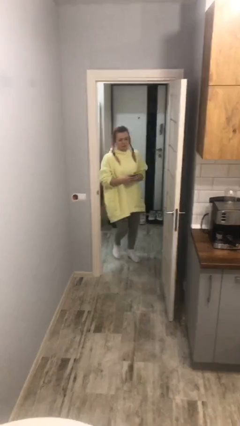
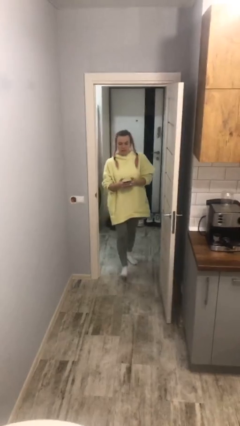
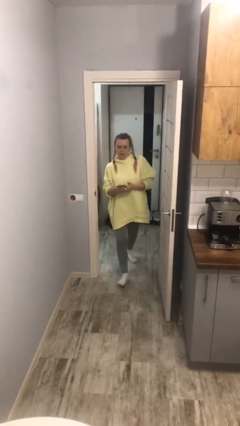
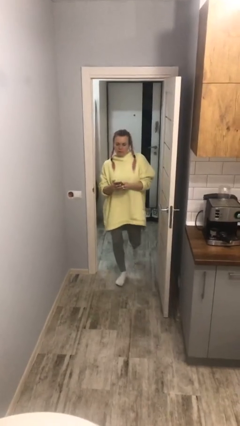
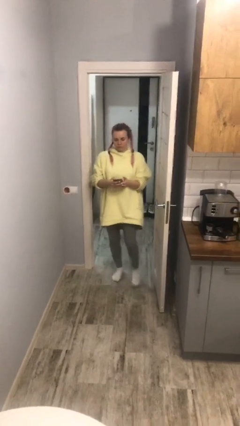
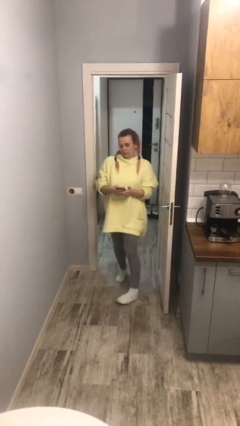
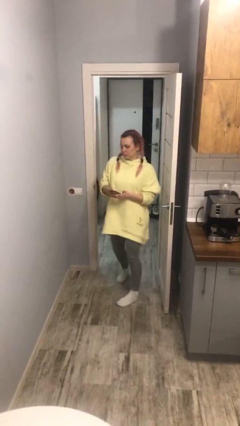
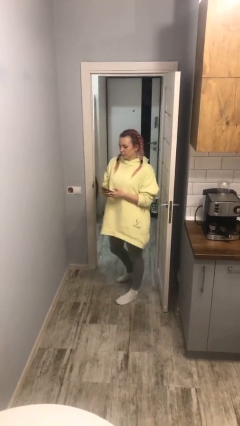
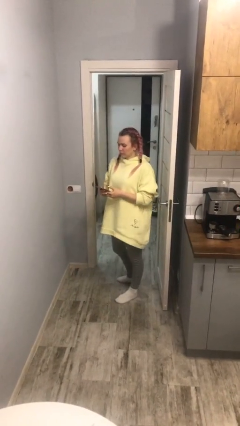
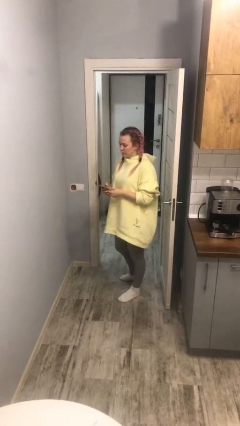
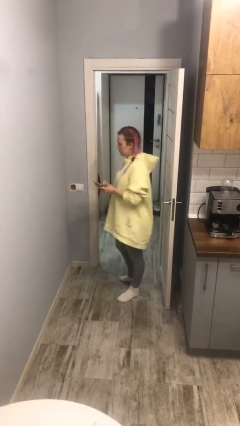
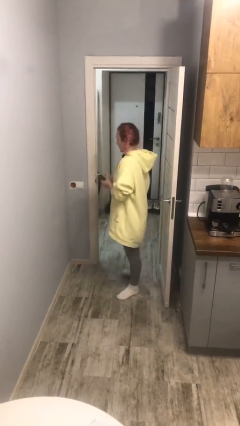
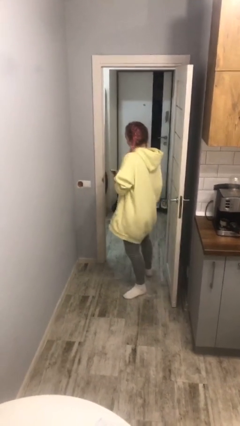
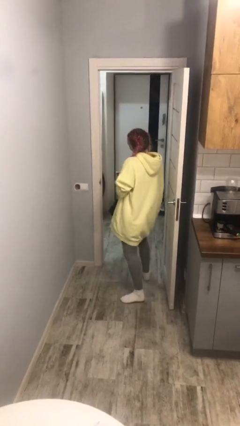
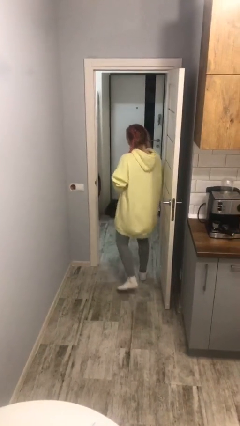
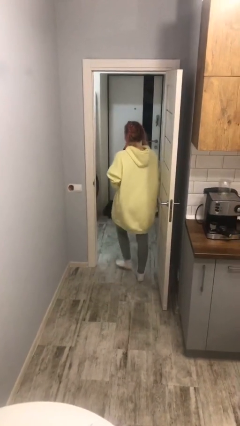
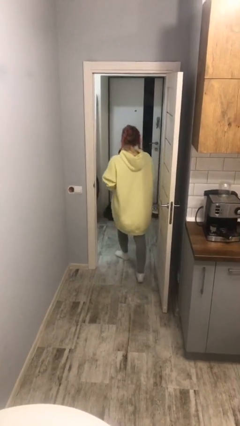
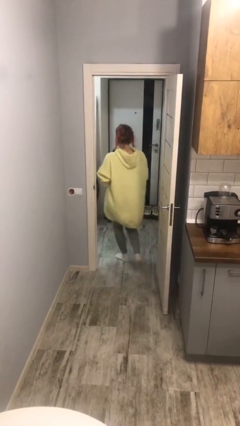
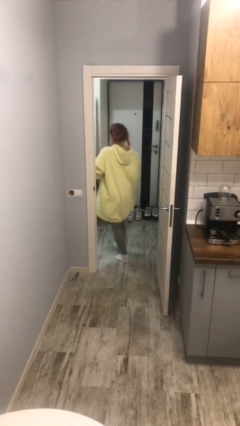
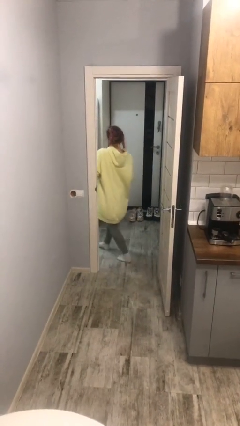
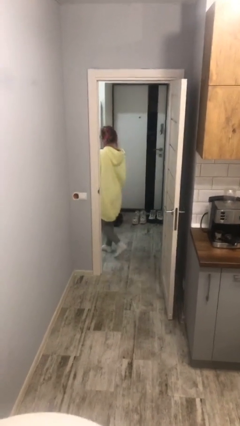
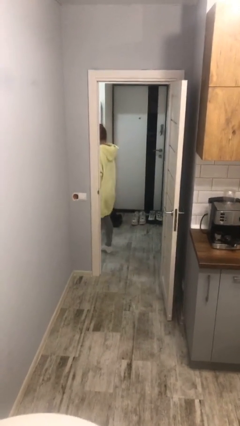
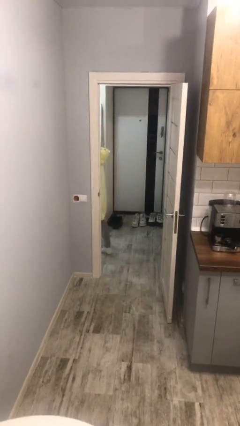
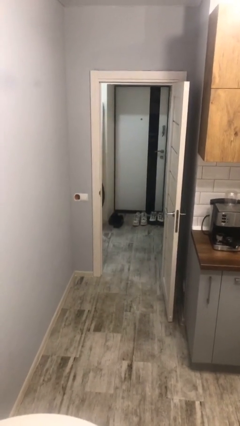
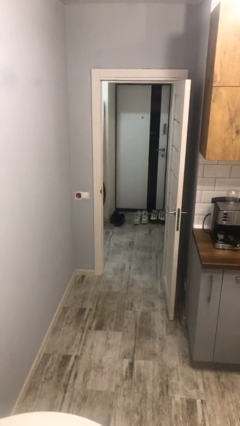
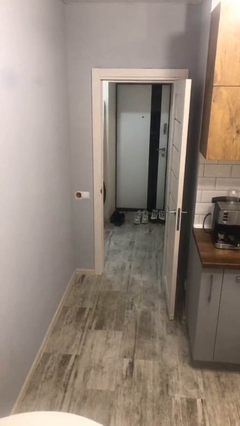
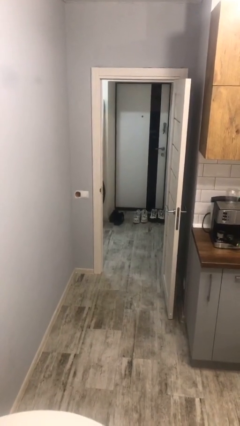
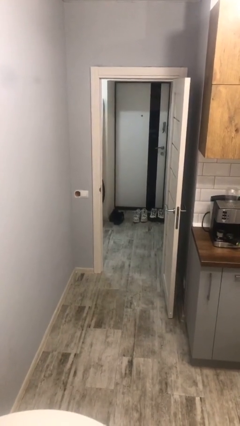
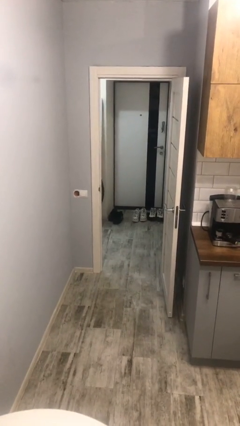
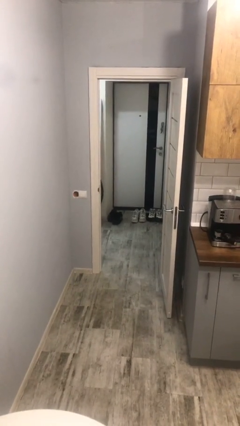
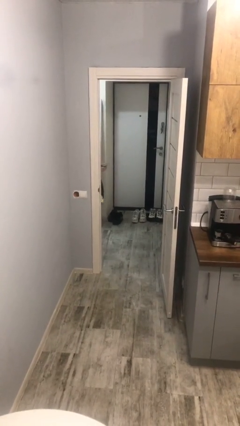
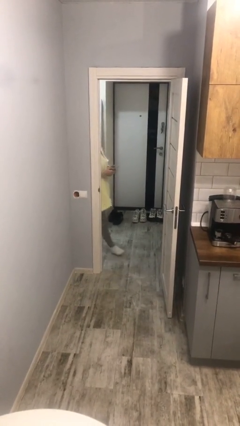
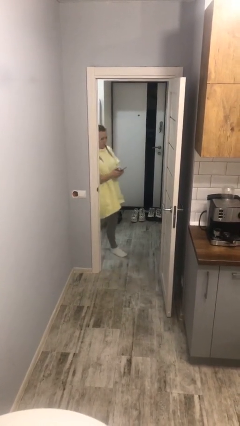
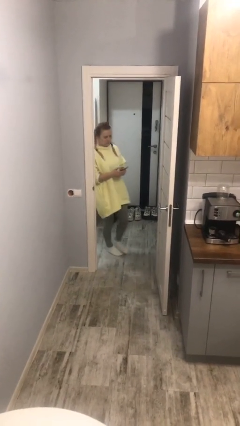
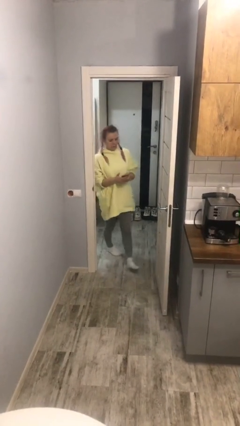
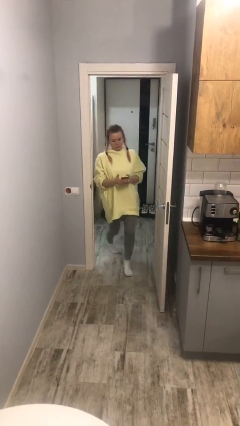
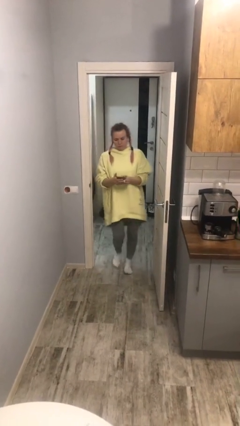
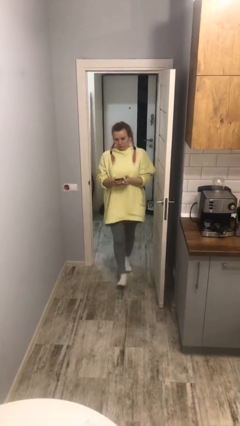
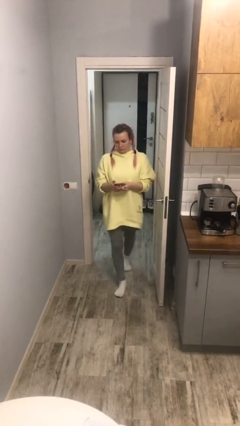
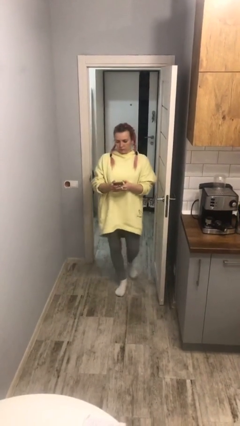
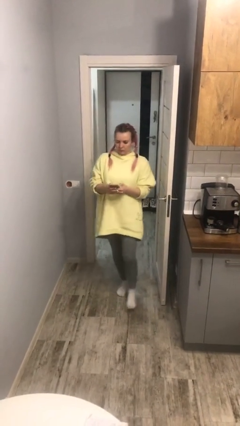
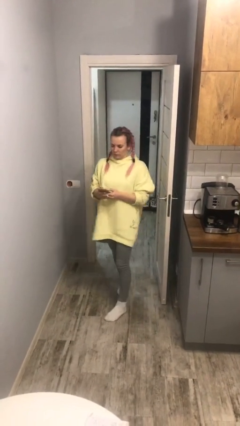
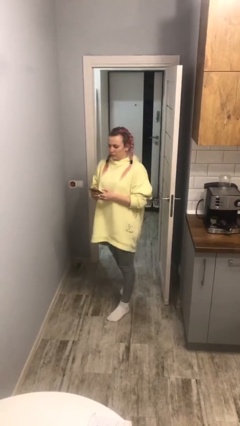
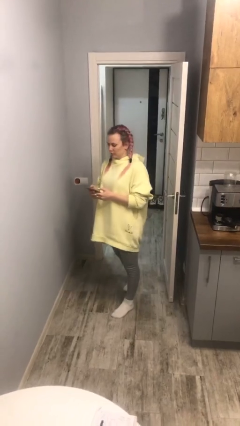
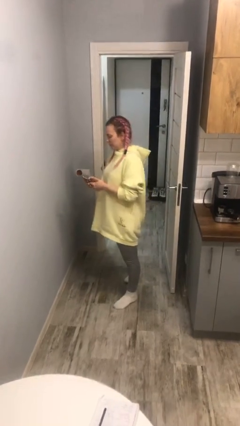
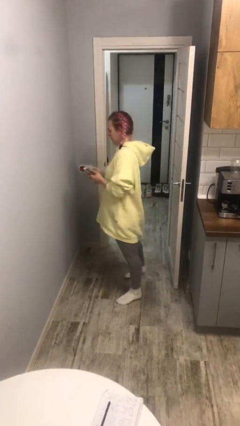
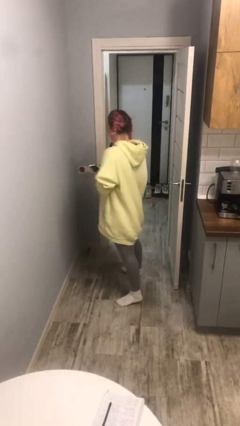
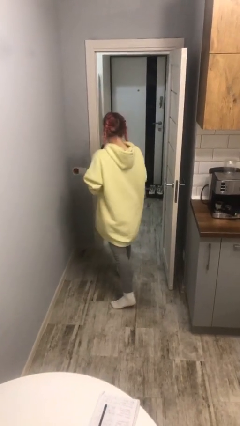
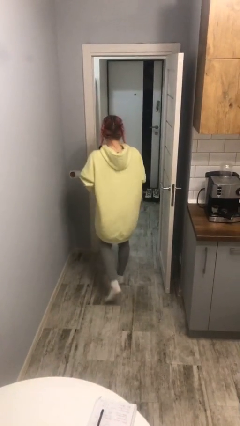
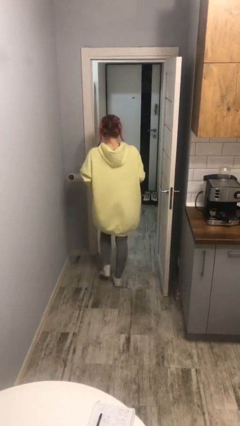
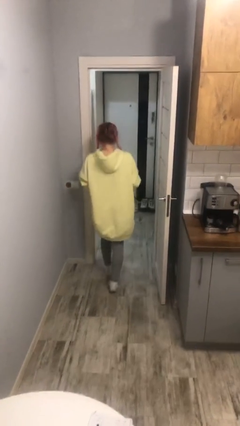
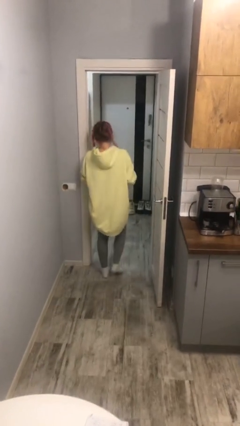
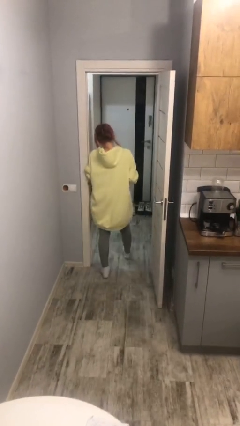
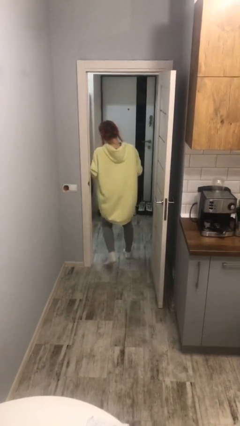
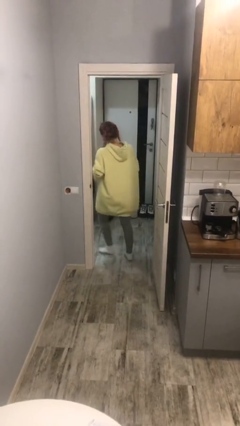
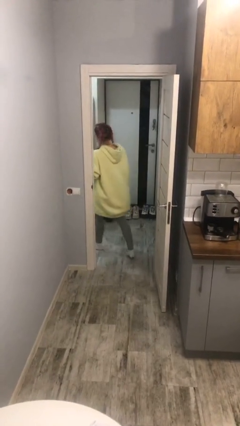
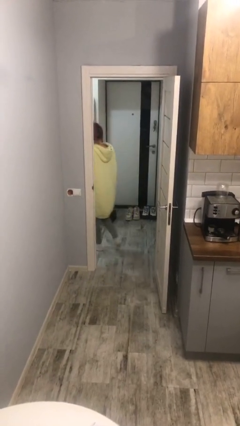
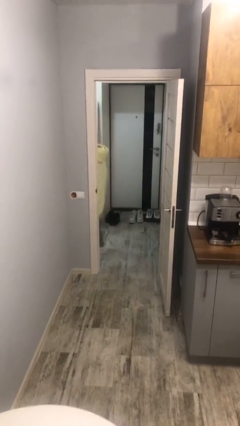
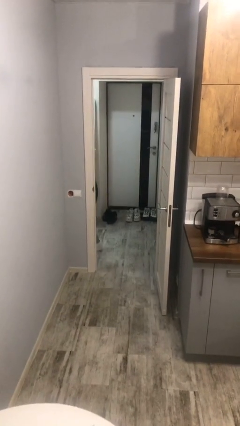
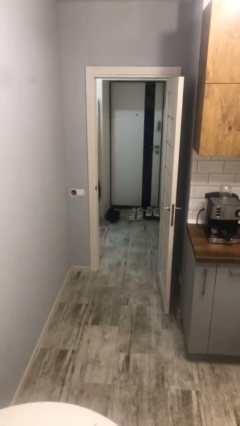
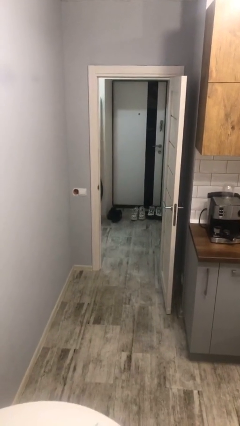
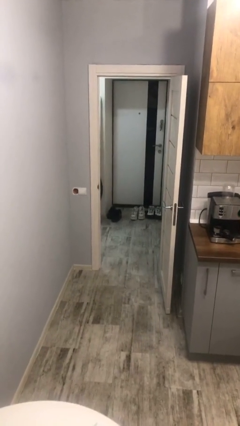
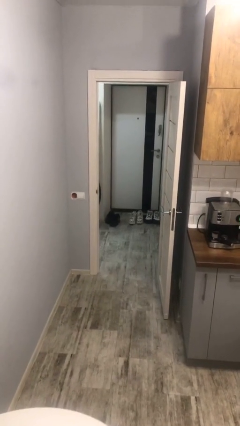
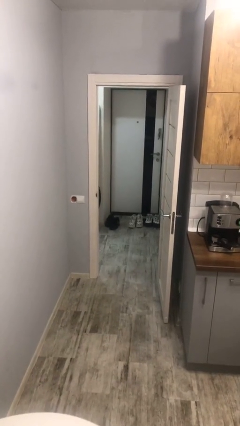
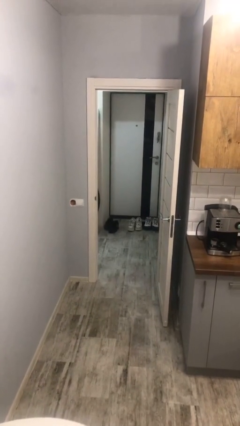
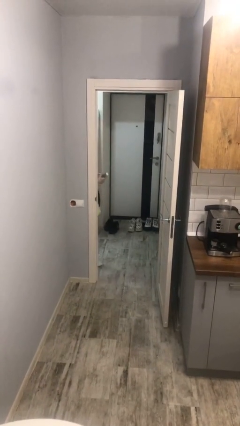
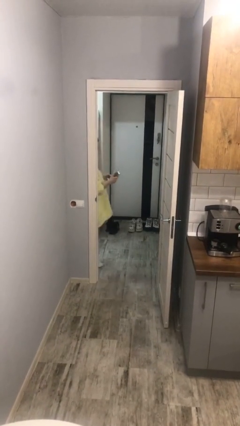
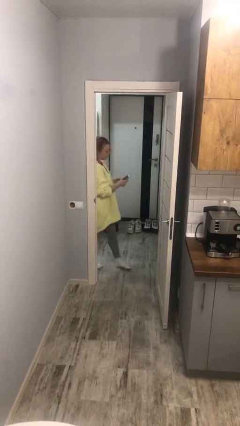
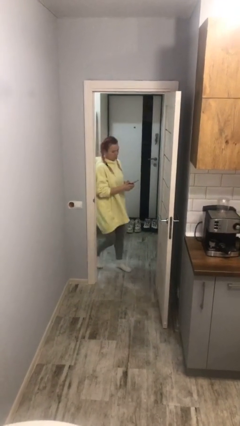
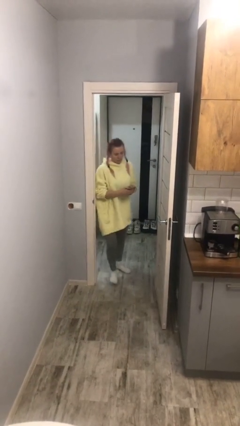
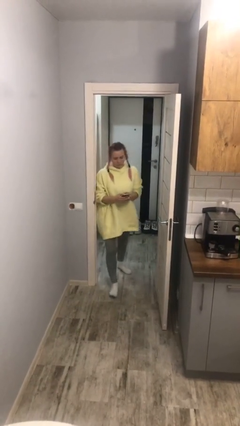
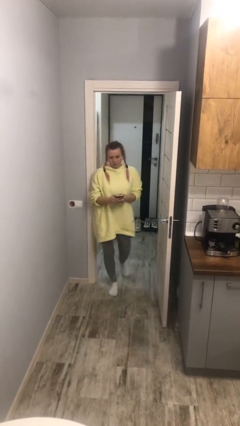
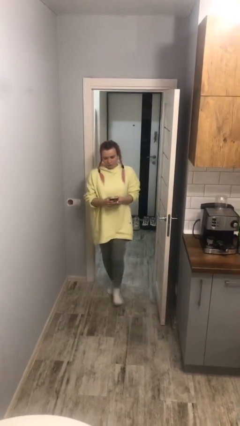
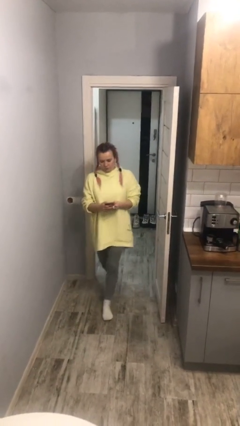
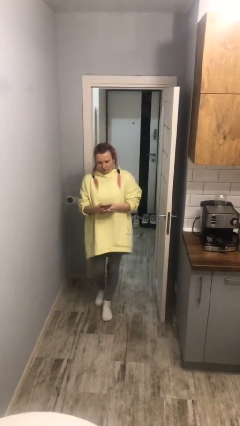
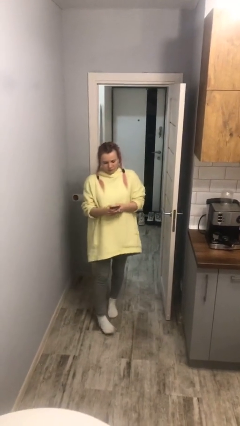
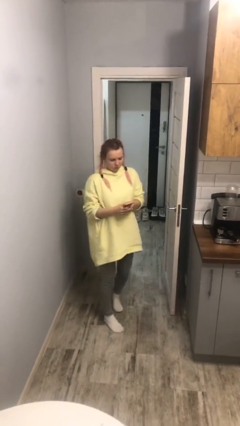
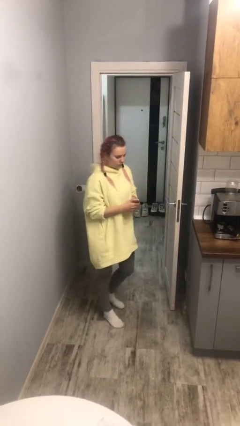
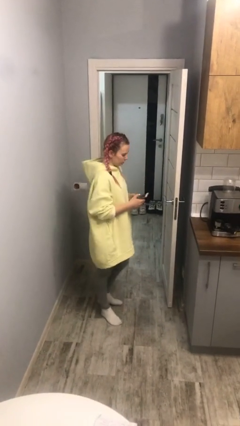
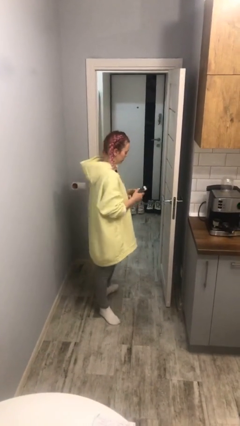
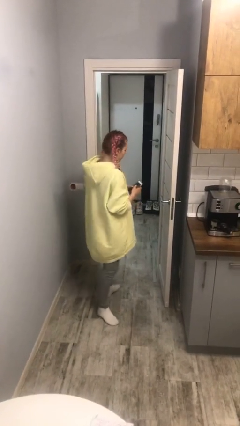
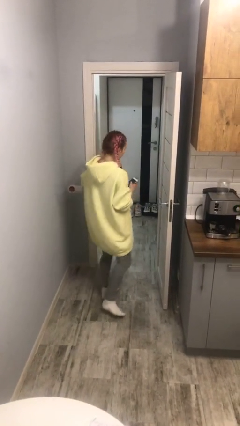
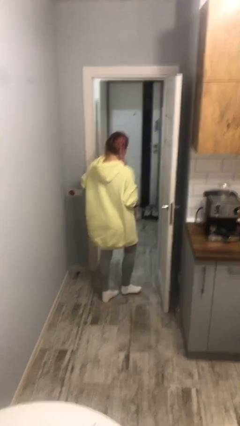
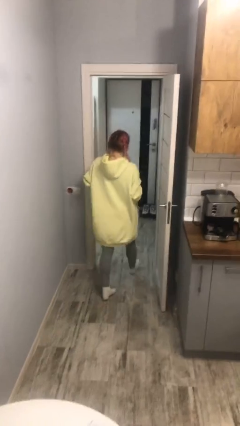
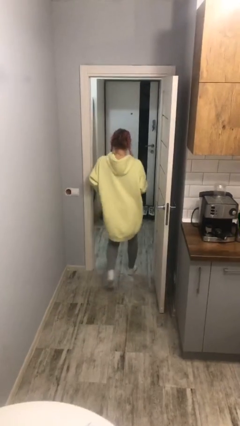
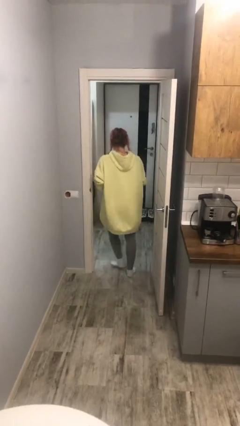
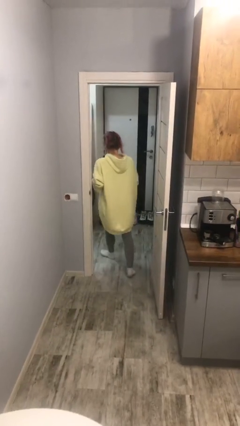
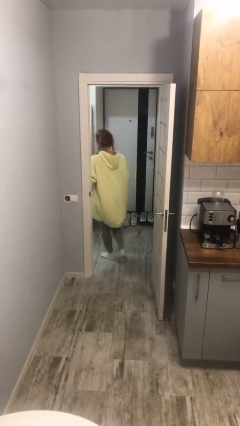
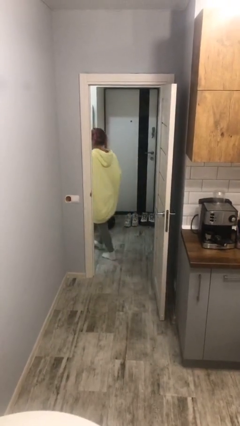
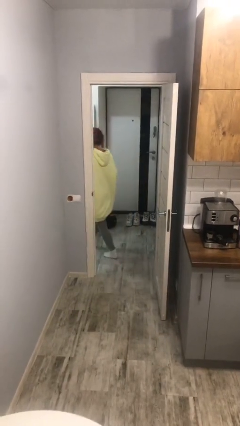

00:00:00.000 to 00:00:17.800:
person texts on phone

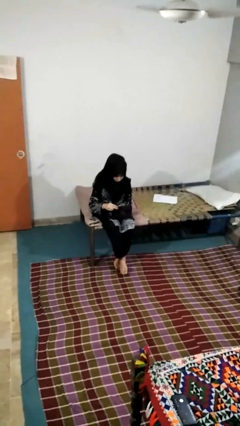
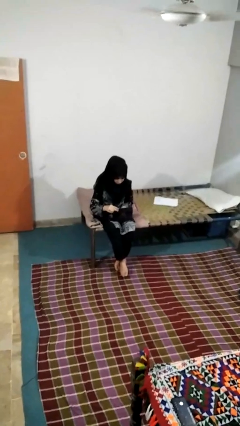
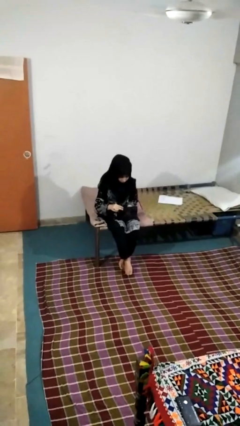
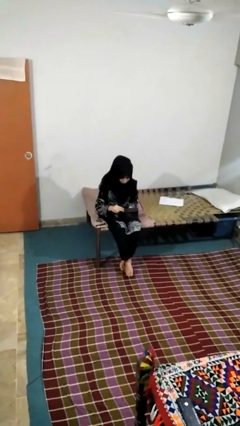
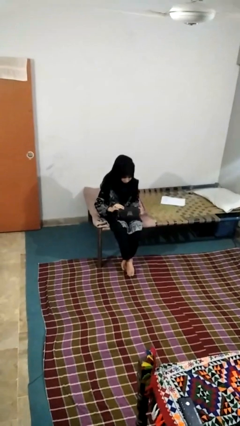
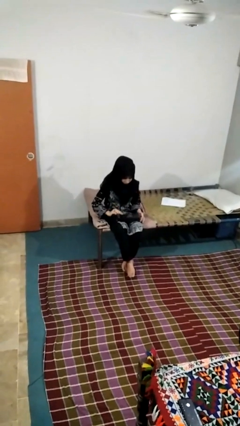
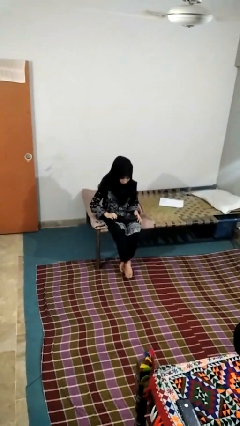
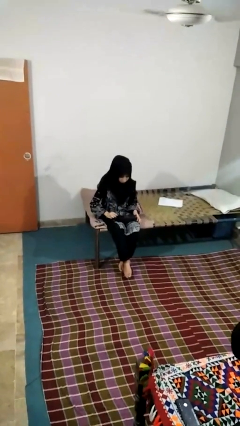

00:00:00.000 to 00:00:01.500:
person closes jewelry box
